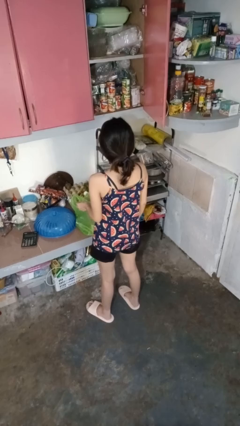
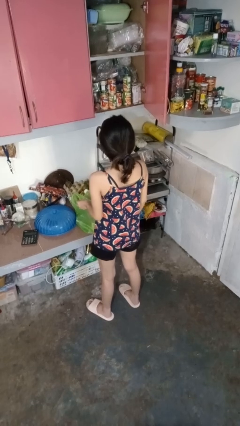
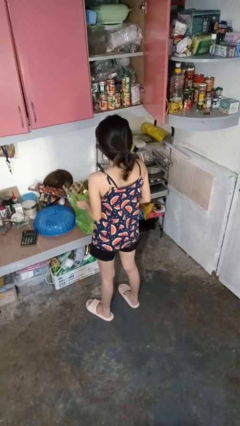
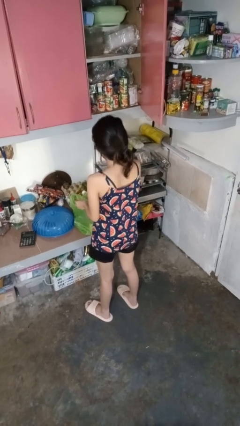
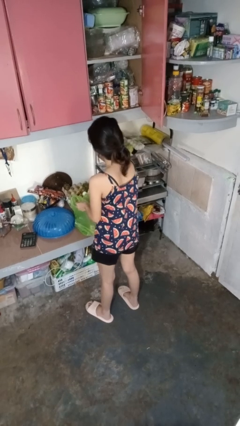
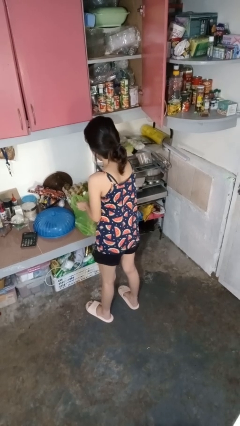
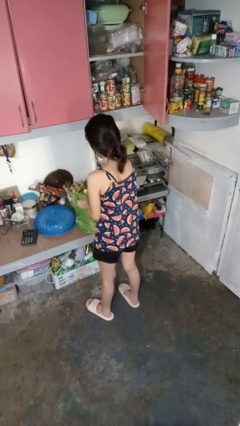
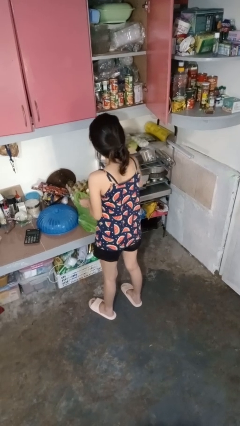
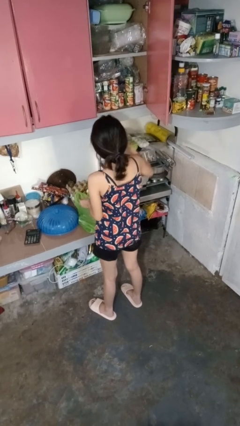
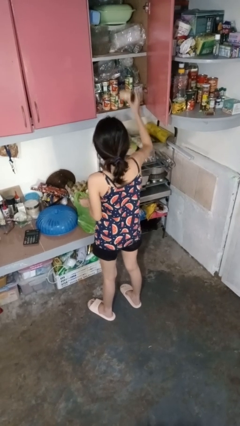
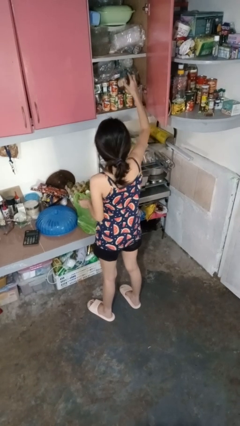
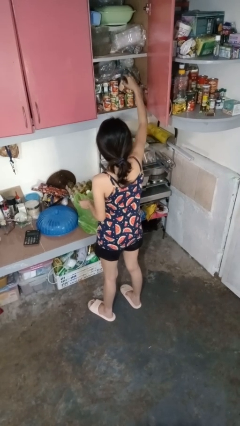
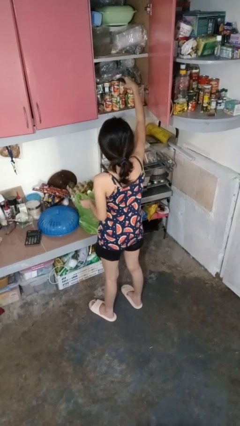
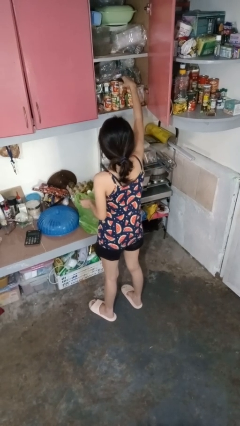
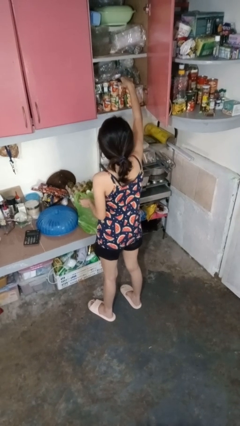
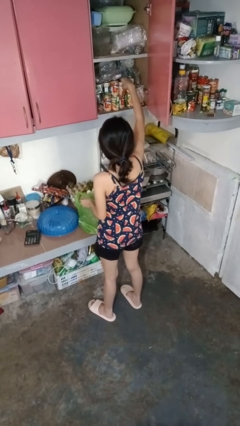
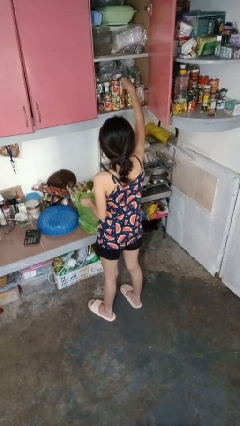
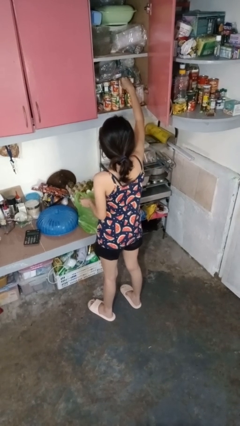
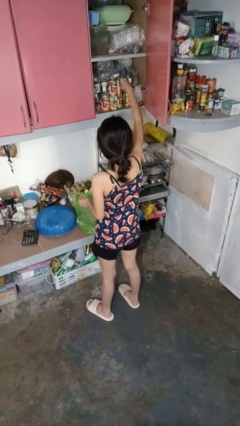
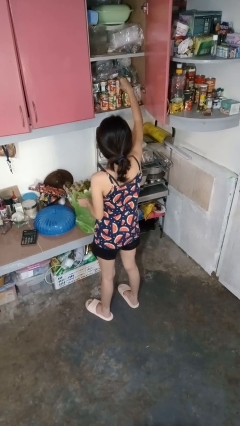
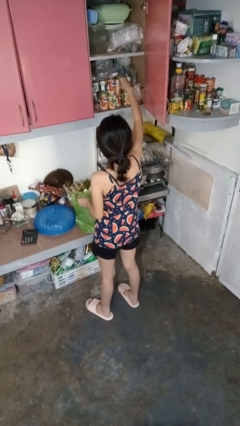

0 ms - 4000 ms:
person loads groceries into cabinet

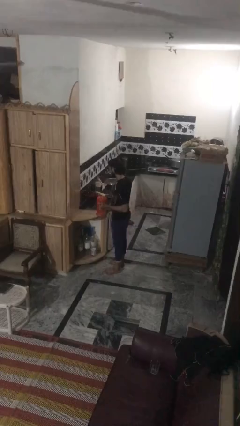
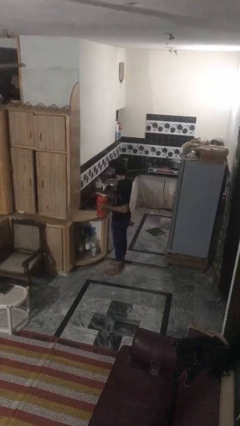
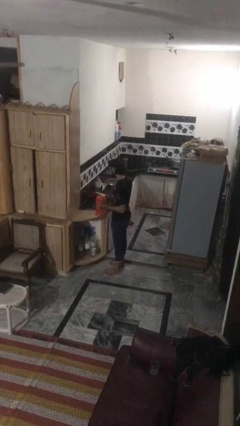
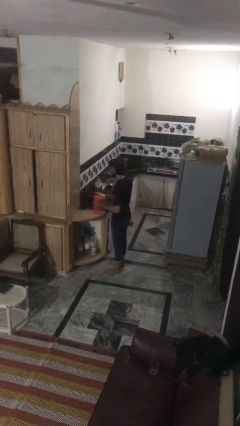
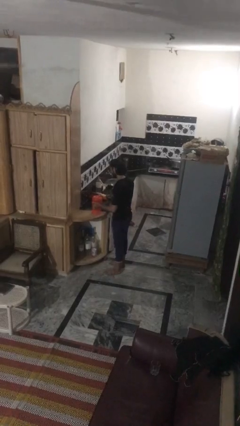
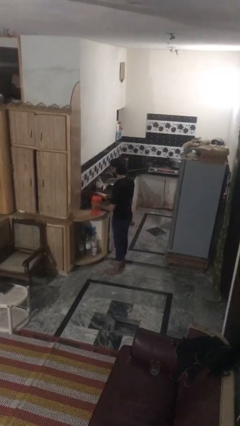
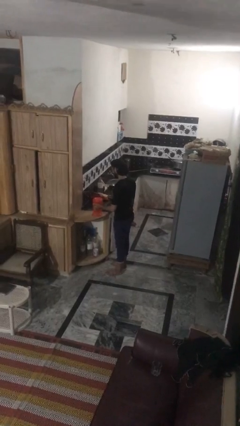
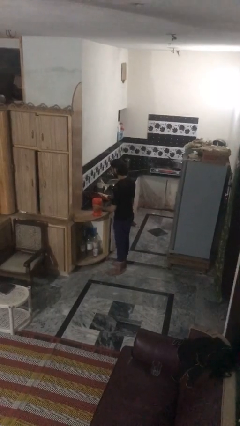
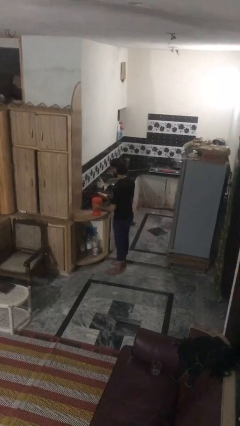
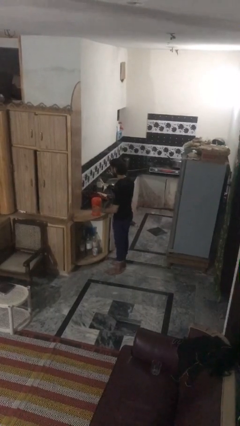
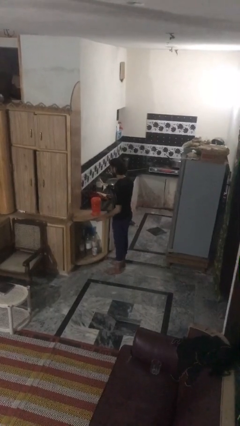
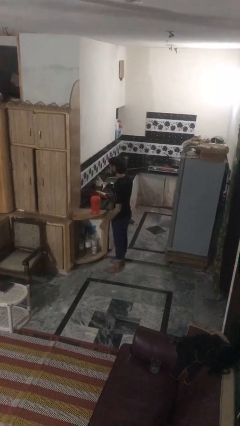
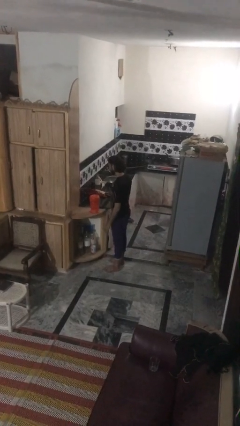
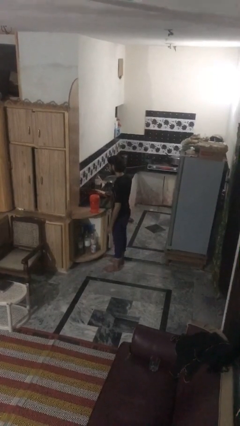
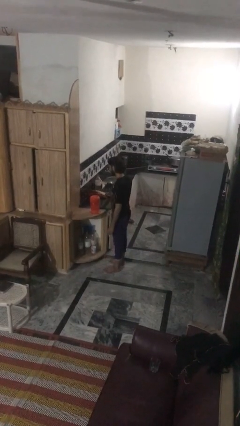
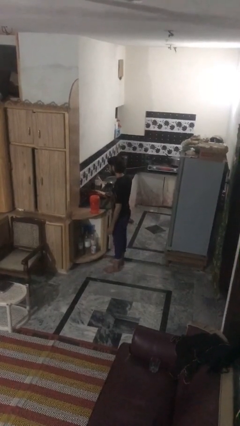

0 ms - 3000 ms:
person puts down object on countertop

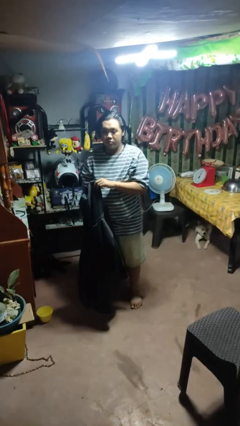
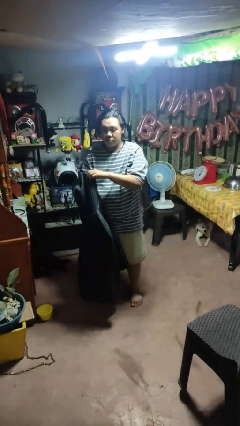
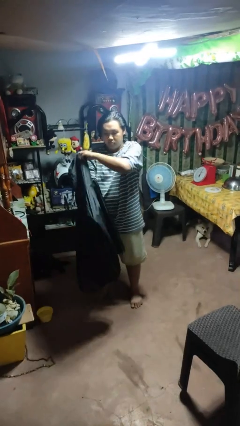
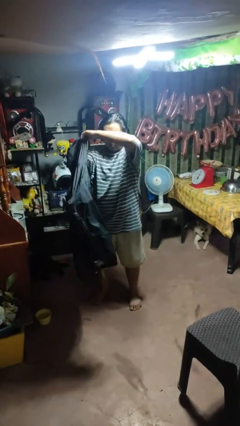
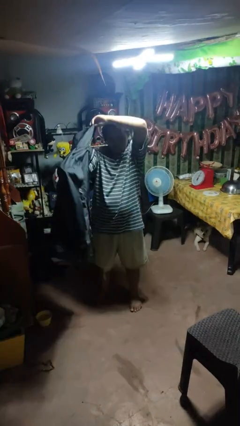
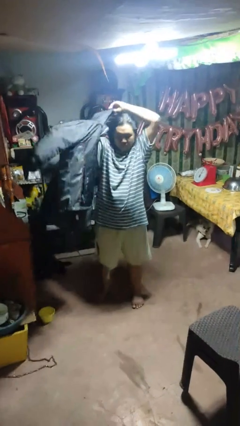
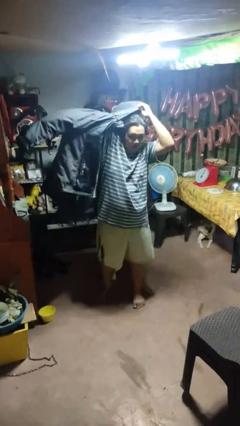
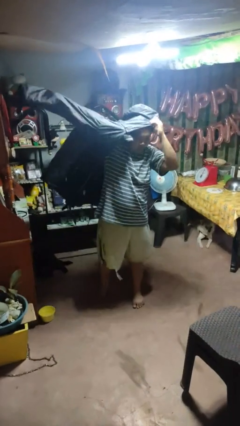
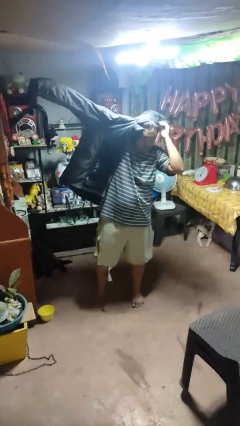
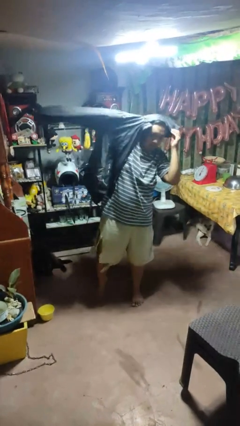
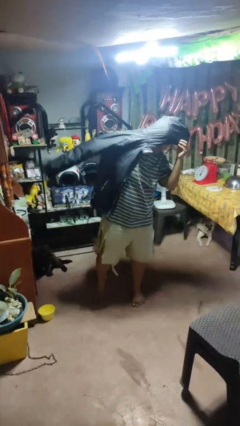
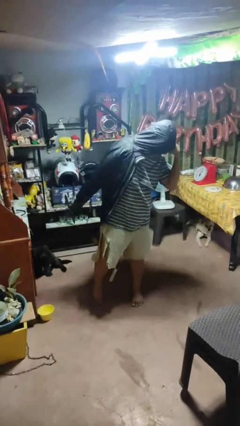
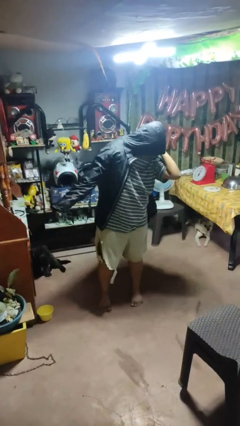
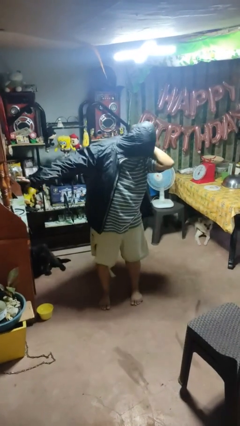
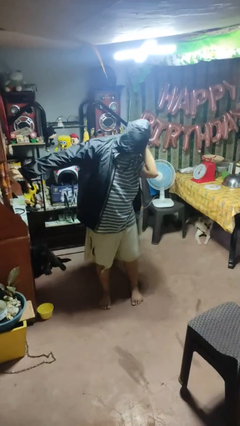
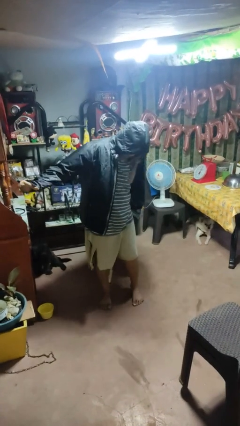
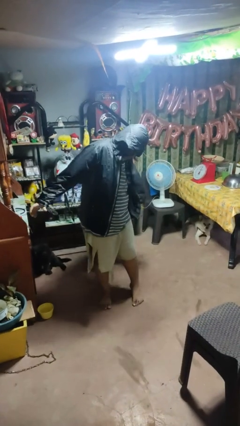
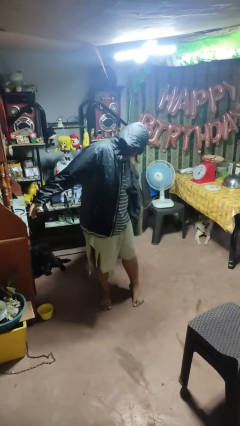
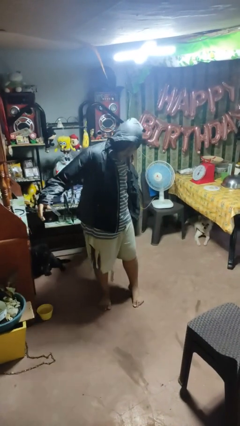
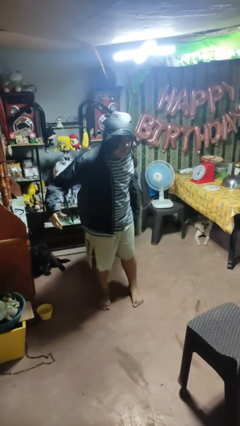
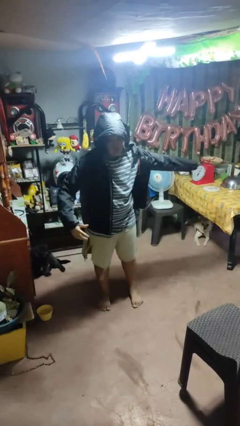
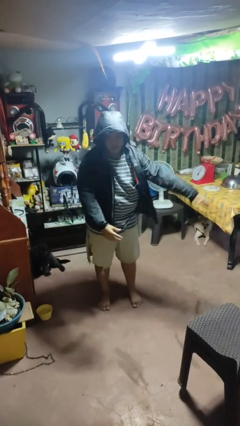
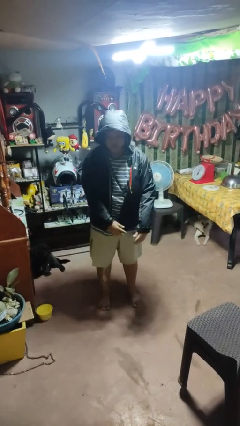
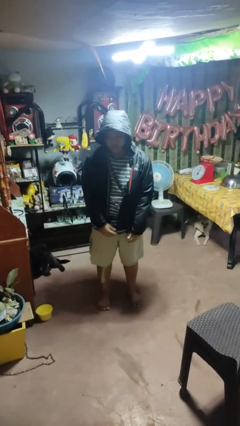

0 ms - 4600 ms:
person puts on hoodie

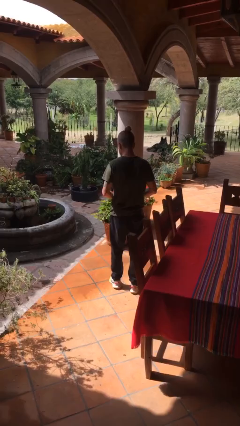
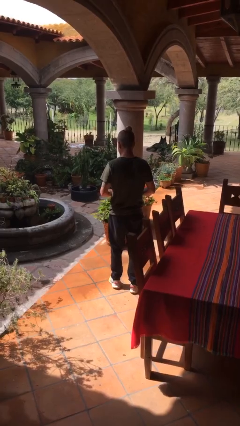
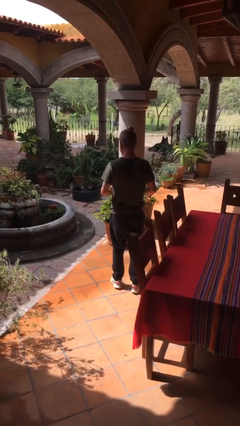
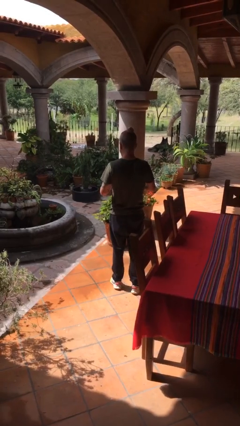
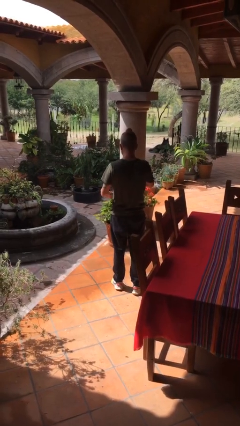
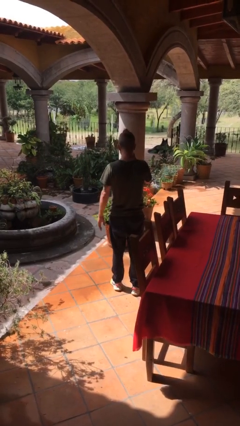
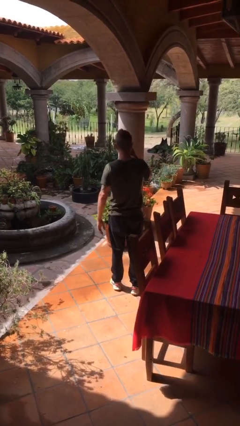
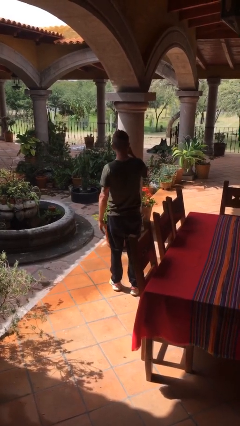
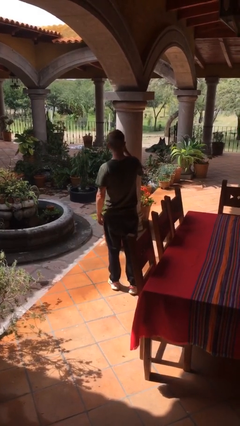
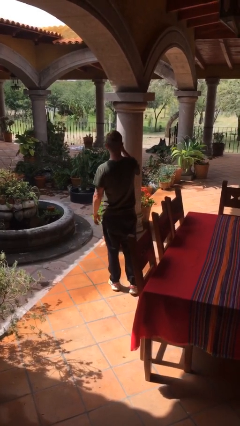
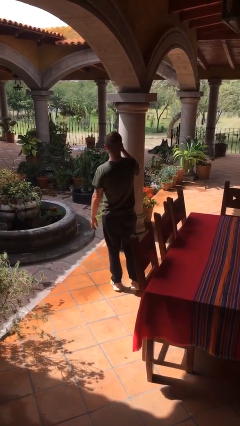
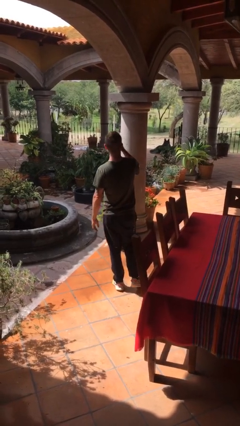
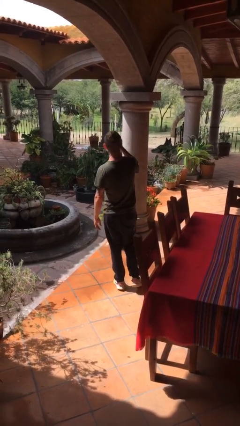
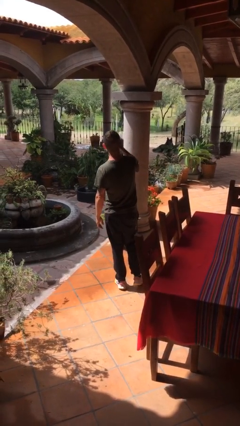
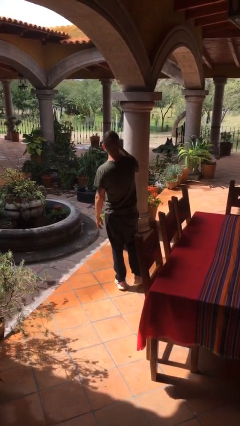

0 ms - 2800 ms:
person drinks from beverage can

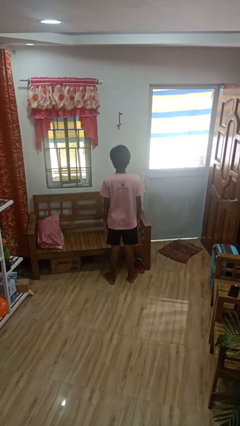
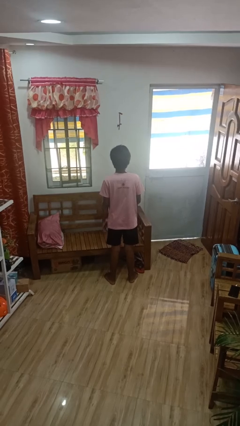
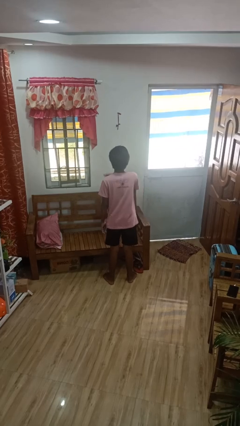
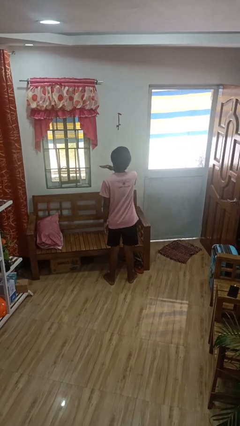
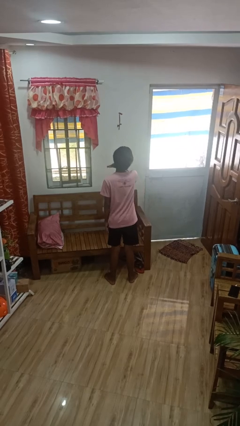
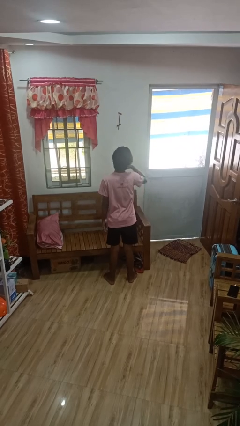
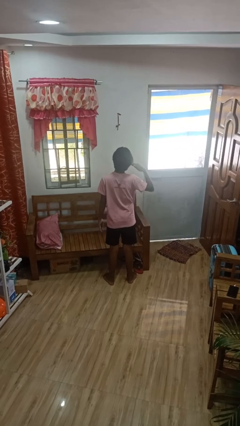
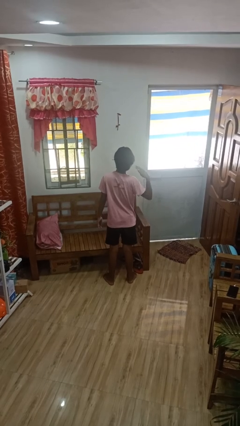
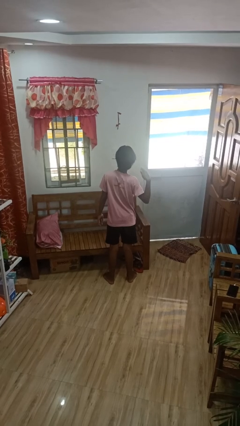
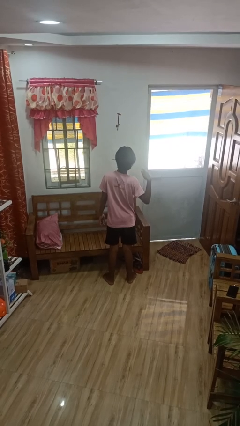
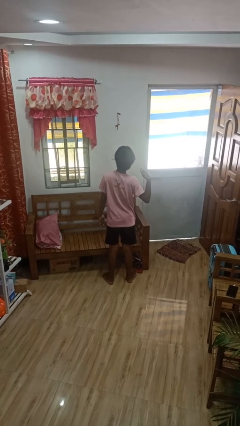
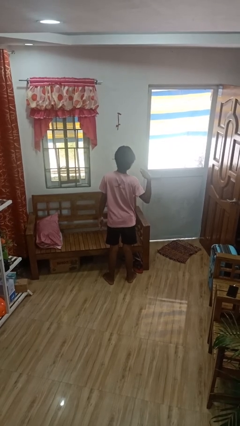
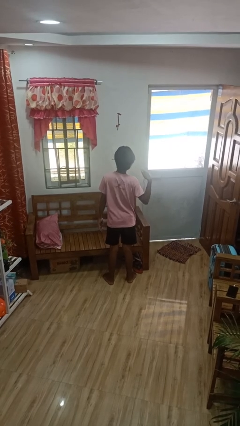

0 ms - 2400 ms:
person gestures cut

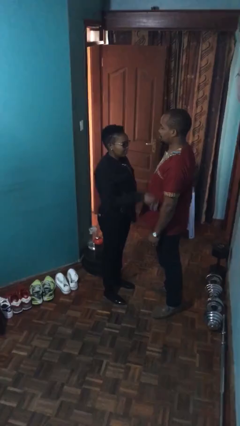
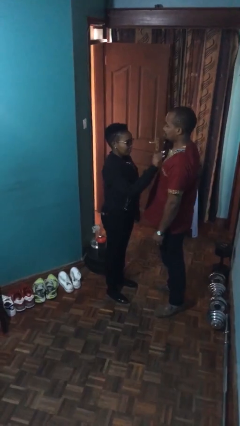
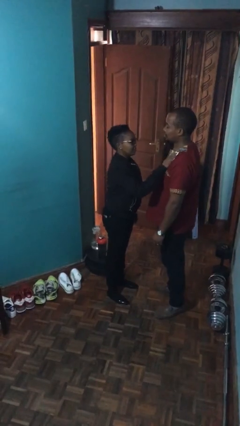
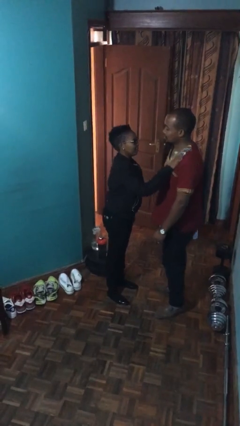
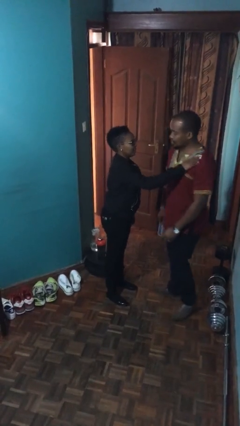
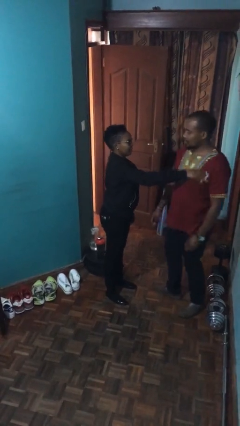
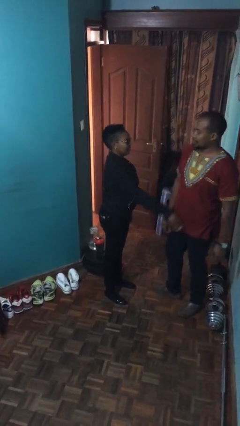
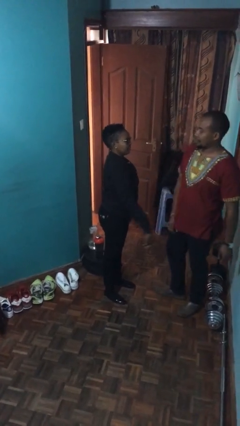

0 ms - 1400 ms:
person shoves person
